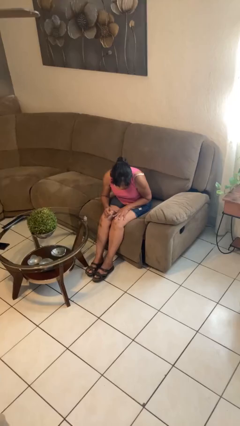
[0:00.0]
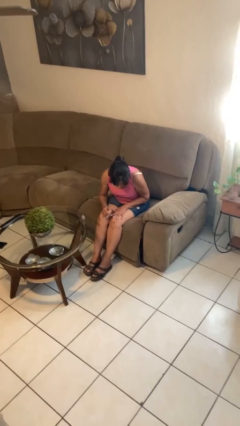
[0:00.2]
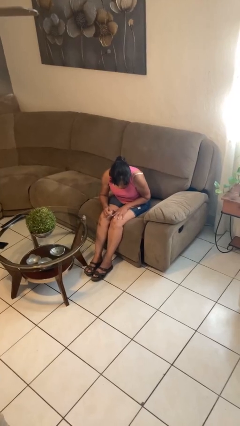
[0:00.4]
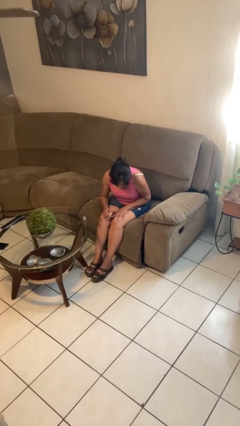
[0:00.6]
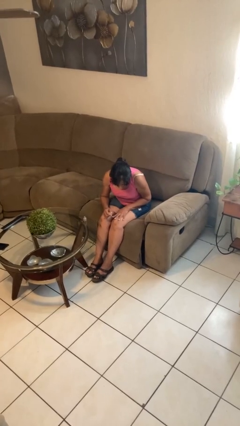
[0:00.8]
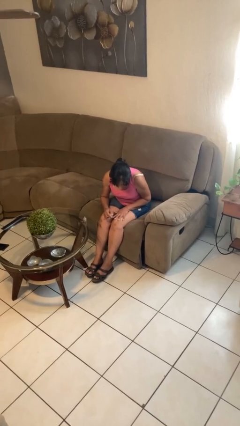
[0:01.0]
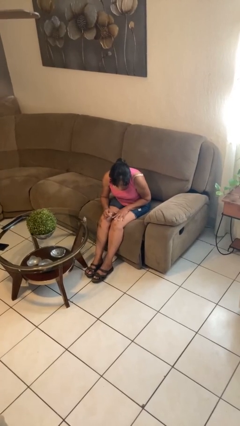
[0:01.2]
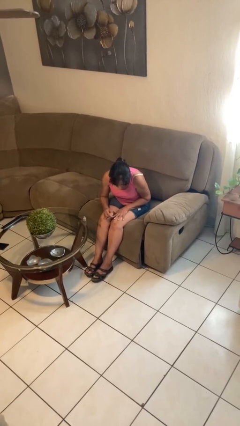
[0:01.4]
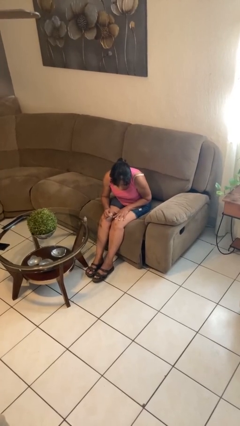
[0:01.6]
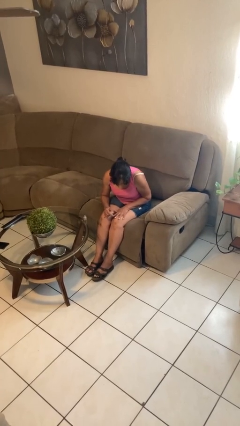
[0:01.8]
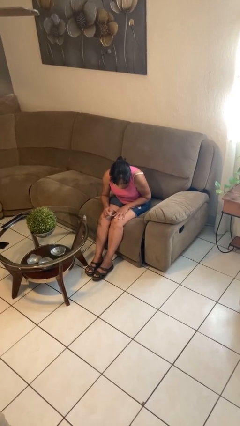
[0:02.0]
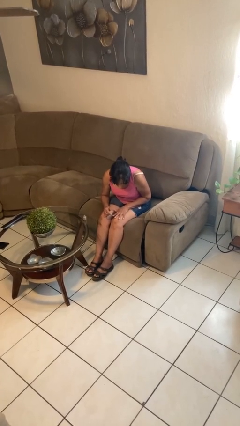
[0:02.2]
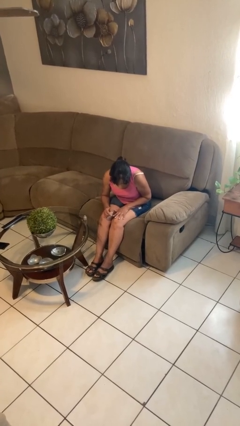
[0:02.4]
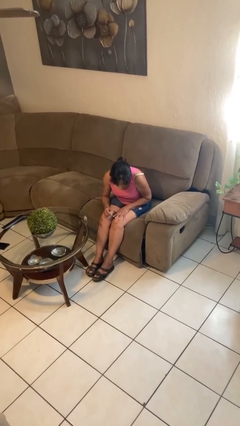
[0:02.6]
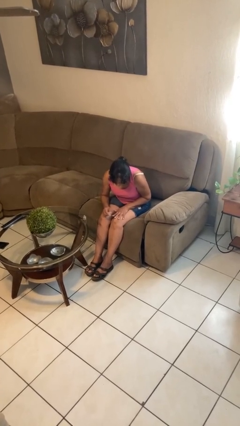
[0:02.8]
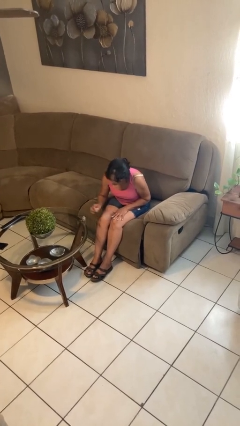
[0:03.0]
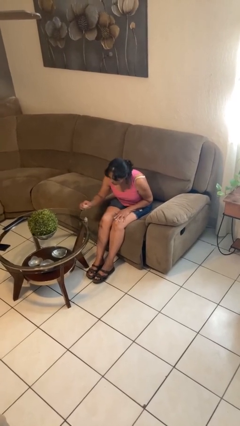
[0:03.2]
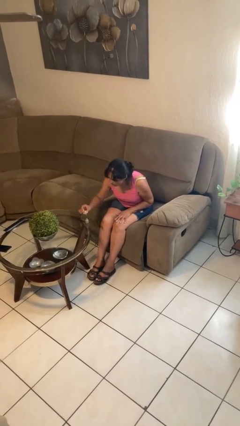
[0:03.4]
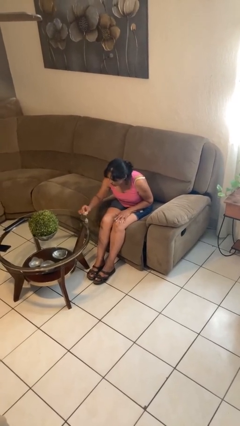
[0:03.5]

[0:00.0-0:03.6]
person paints fingernails

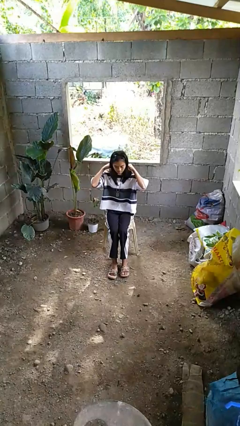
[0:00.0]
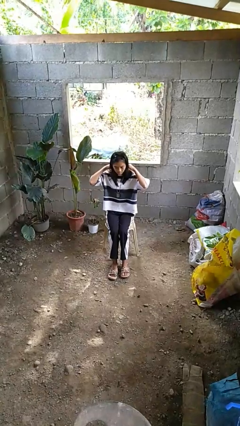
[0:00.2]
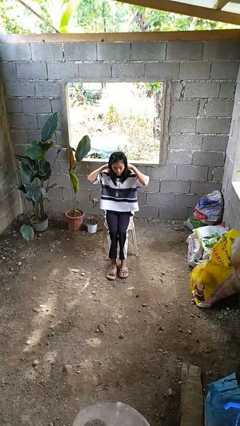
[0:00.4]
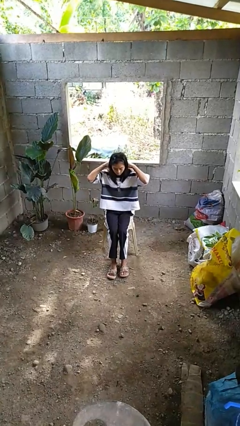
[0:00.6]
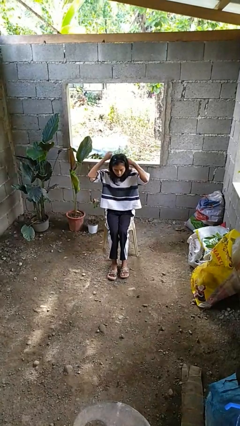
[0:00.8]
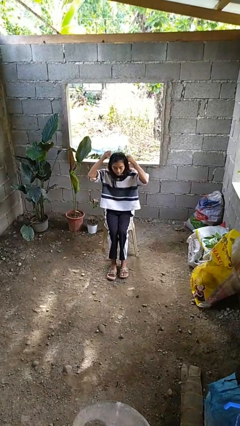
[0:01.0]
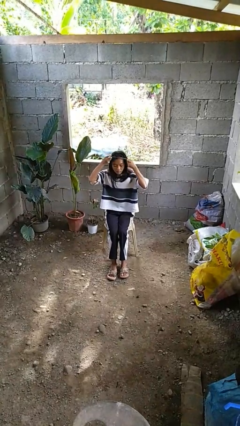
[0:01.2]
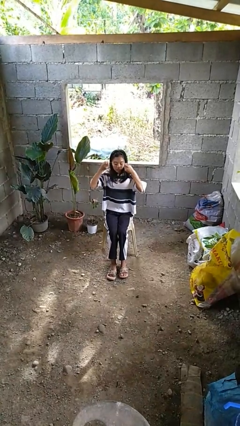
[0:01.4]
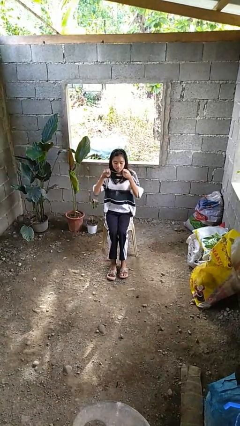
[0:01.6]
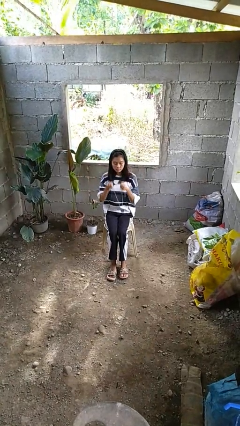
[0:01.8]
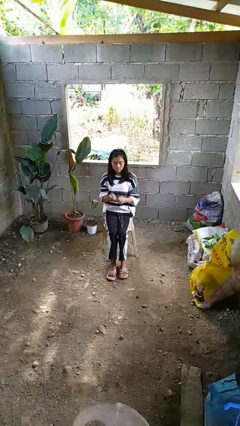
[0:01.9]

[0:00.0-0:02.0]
person takes off necklace

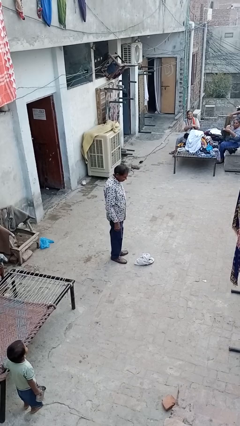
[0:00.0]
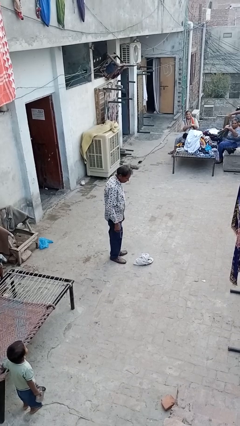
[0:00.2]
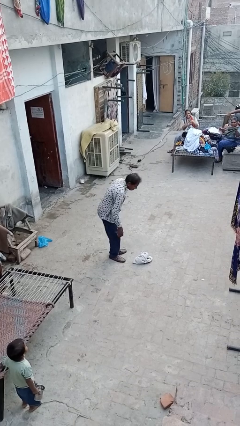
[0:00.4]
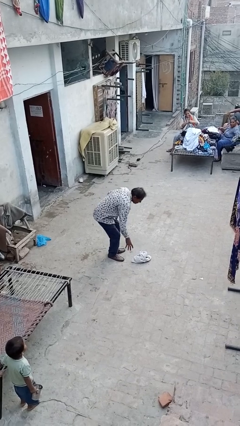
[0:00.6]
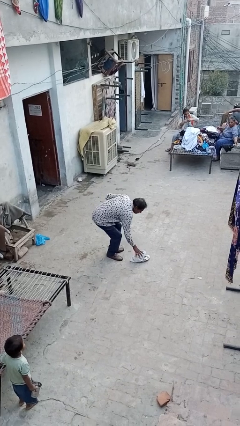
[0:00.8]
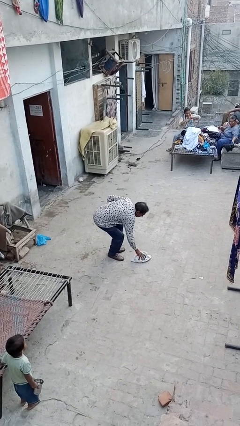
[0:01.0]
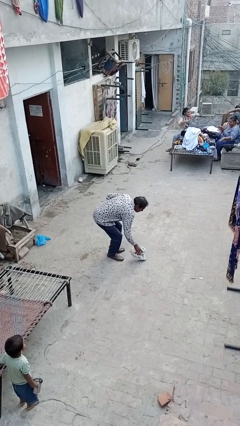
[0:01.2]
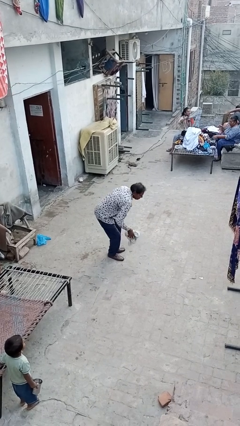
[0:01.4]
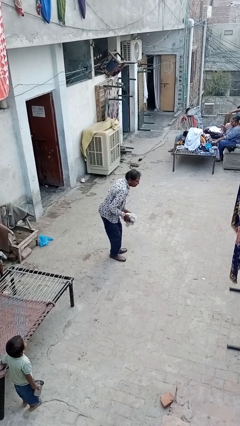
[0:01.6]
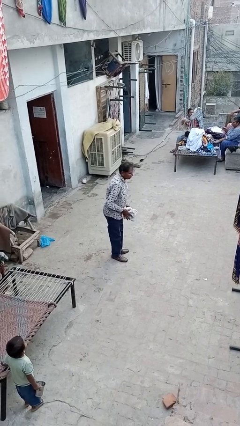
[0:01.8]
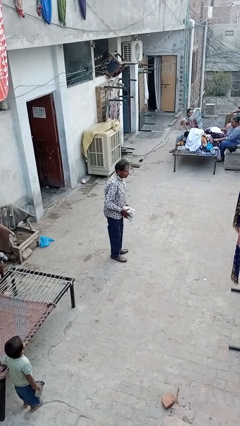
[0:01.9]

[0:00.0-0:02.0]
person picks up object from floor

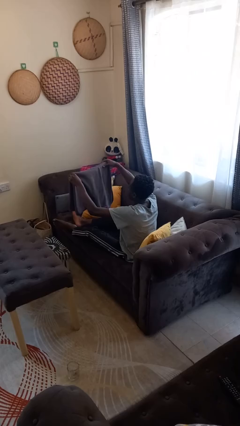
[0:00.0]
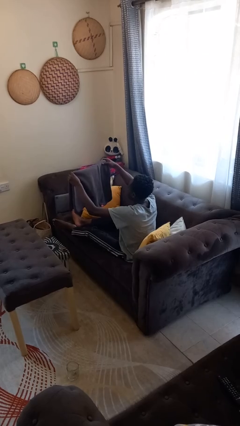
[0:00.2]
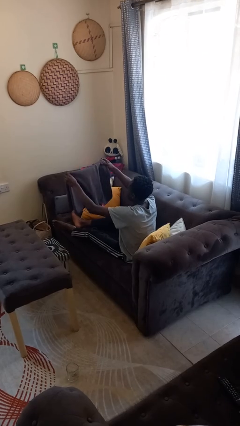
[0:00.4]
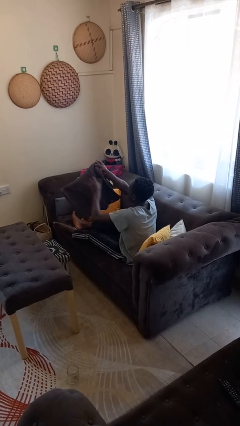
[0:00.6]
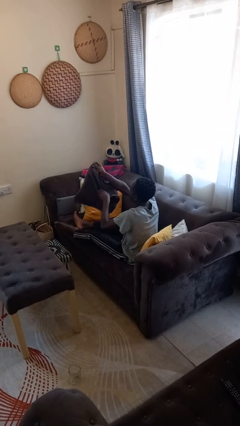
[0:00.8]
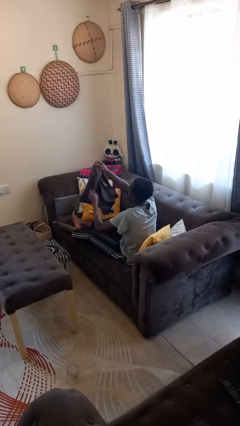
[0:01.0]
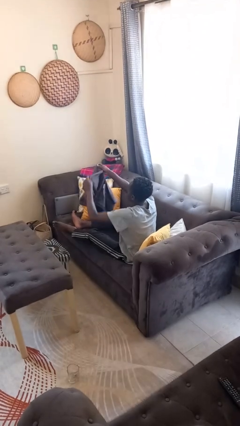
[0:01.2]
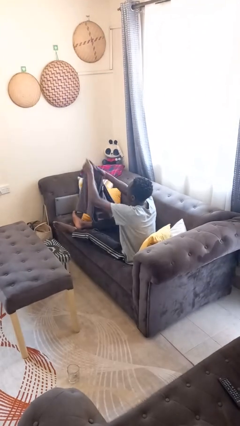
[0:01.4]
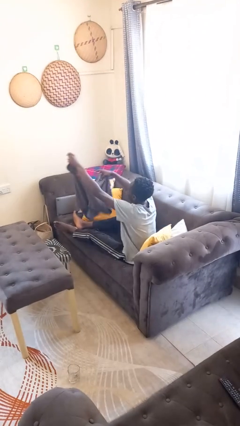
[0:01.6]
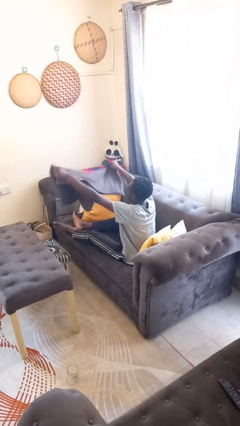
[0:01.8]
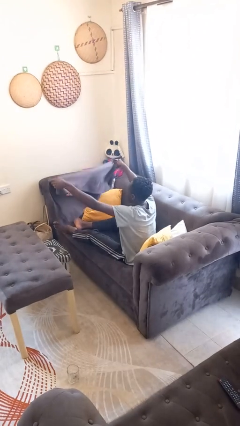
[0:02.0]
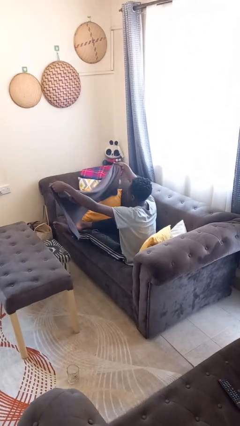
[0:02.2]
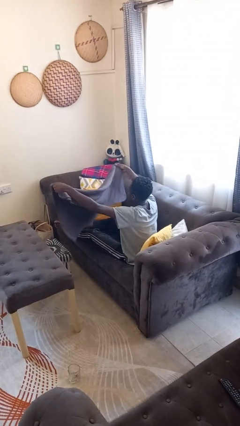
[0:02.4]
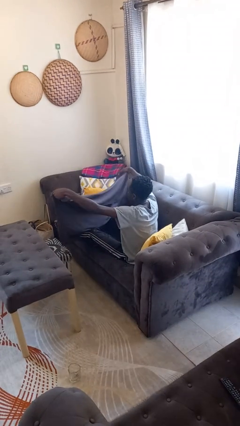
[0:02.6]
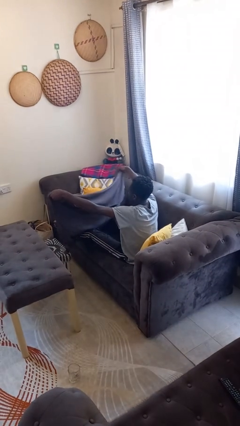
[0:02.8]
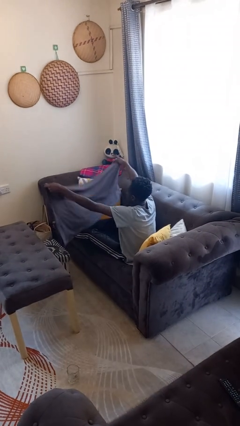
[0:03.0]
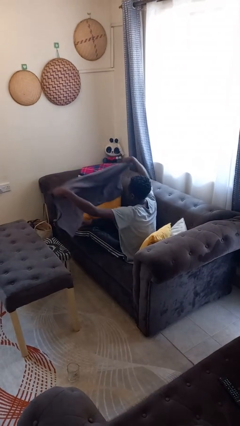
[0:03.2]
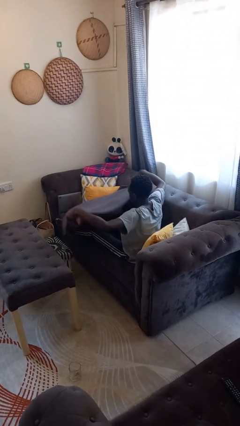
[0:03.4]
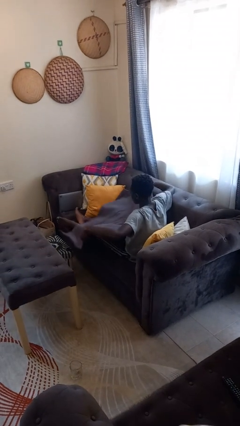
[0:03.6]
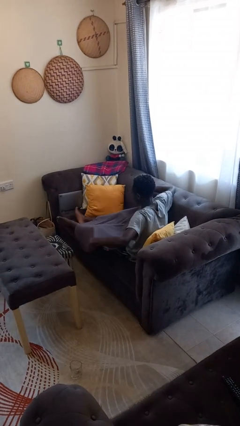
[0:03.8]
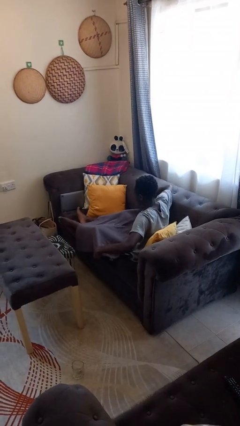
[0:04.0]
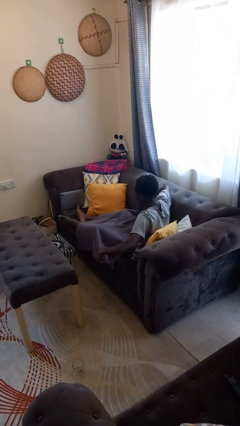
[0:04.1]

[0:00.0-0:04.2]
person unfolds blanket

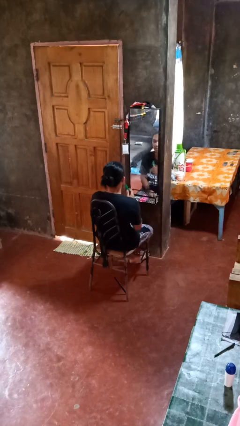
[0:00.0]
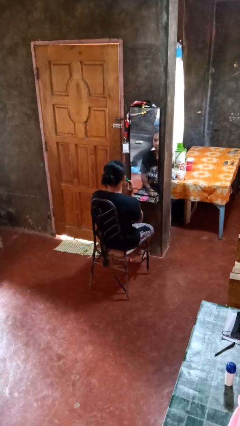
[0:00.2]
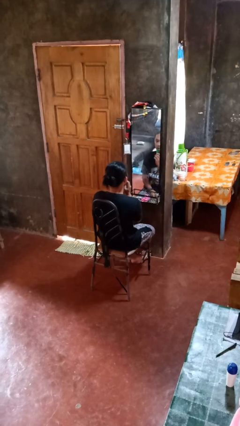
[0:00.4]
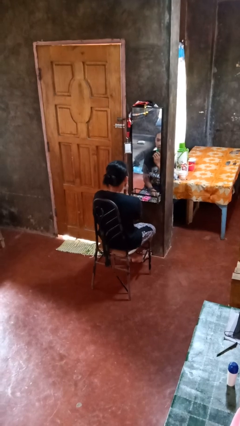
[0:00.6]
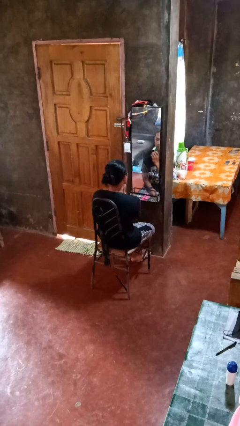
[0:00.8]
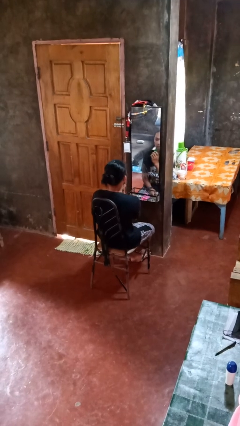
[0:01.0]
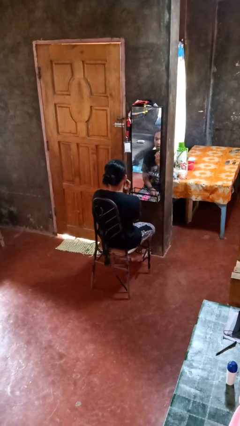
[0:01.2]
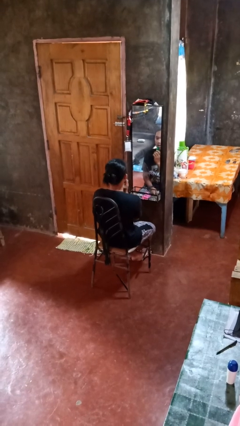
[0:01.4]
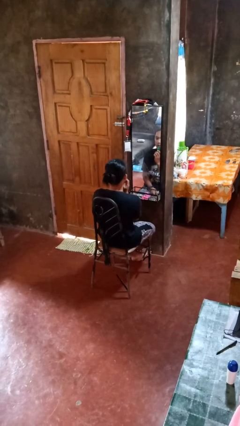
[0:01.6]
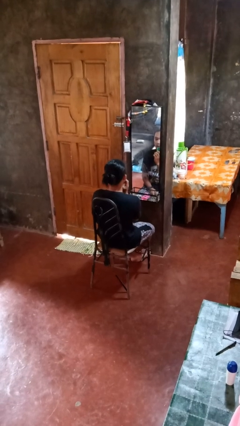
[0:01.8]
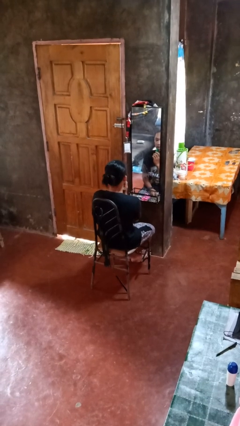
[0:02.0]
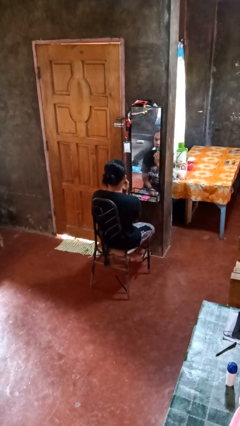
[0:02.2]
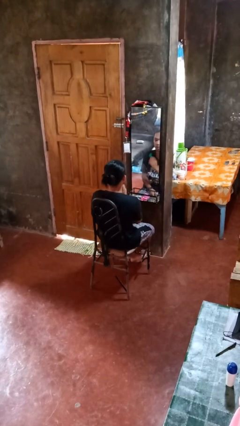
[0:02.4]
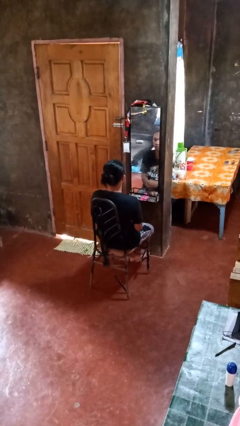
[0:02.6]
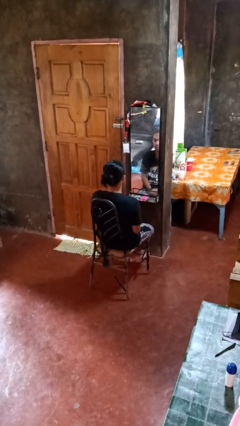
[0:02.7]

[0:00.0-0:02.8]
person applies lip makeup

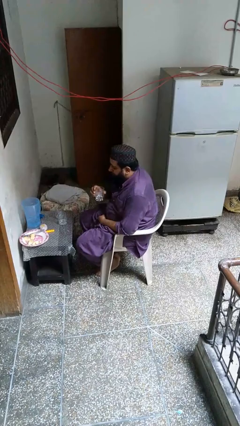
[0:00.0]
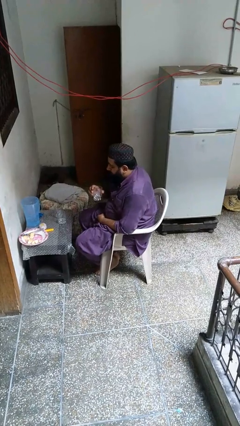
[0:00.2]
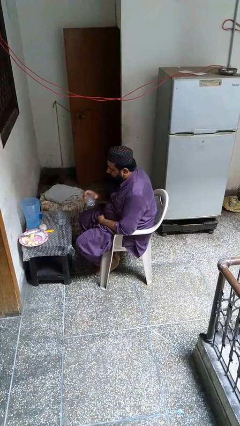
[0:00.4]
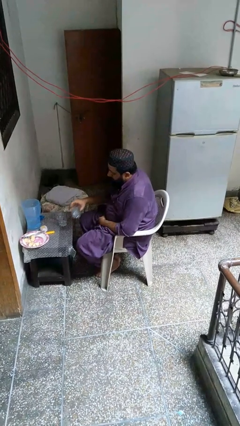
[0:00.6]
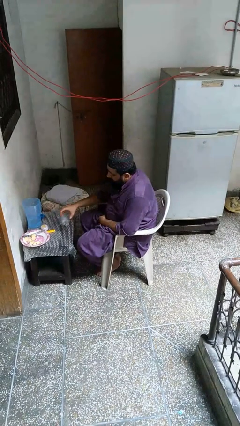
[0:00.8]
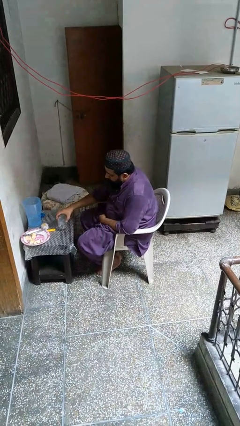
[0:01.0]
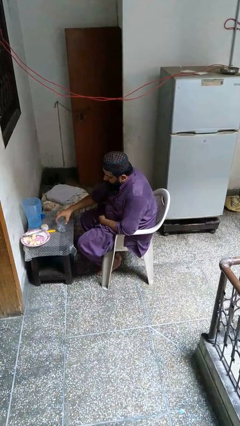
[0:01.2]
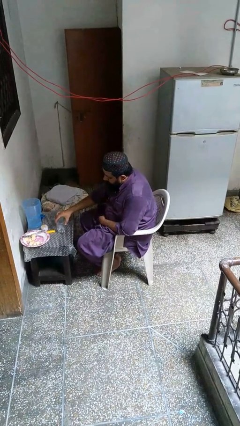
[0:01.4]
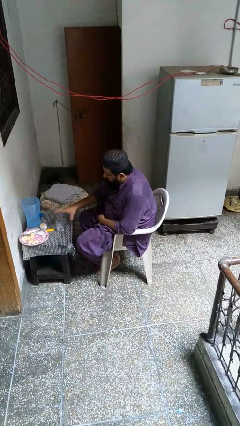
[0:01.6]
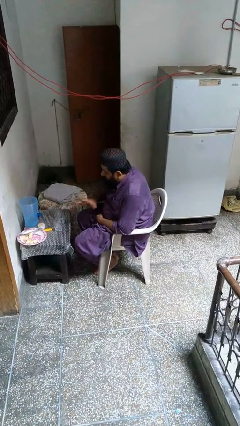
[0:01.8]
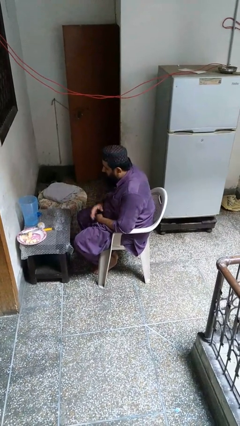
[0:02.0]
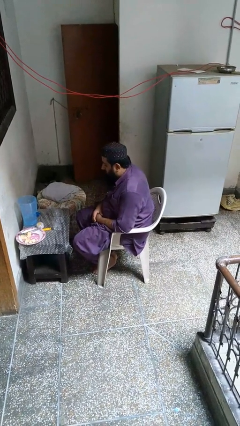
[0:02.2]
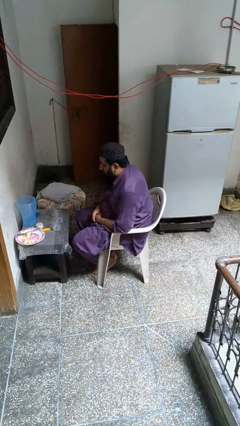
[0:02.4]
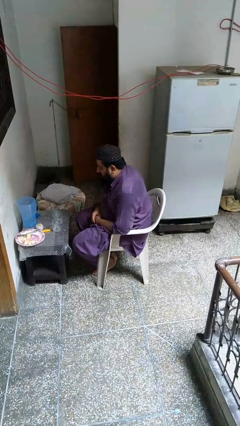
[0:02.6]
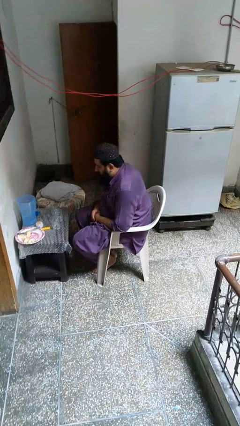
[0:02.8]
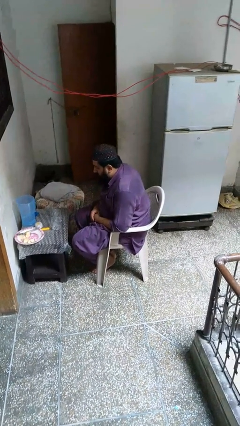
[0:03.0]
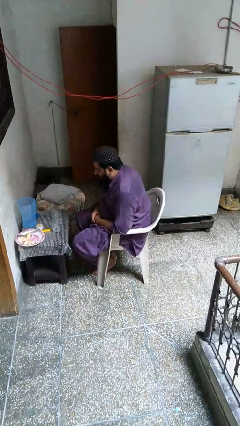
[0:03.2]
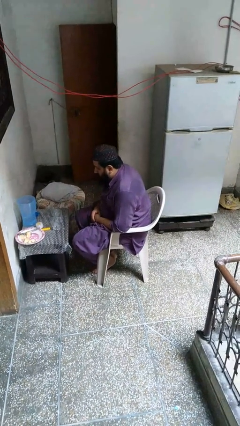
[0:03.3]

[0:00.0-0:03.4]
person puts down object on table
